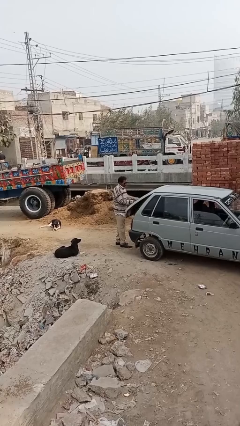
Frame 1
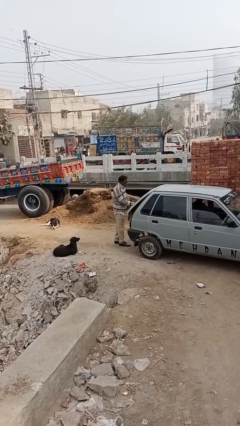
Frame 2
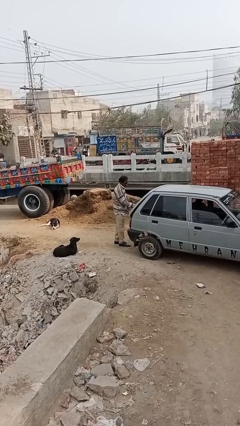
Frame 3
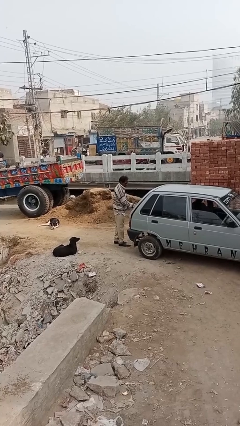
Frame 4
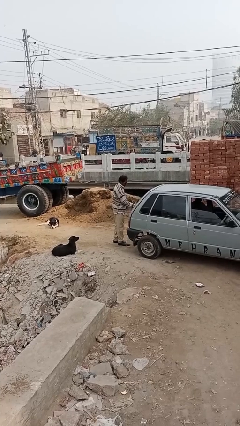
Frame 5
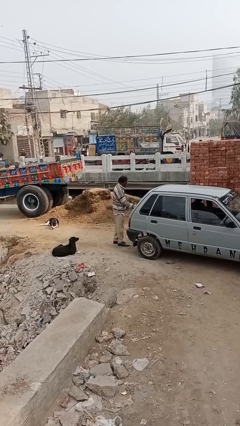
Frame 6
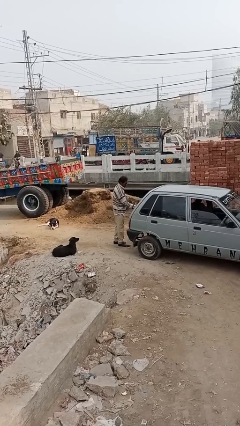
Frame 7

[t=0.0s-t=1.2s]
person closes car trunk

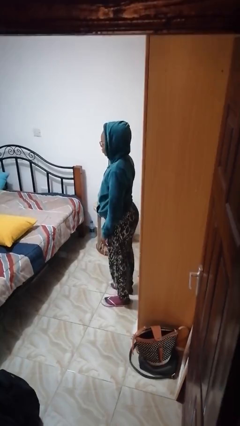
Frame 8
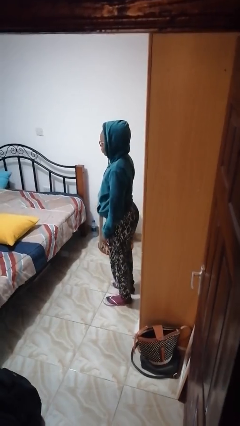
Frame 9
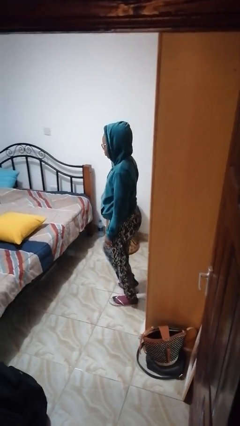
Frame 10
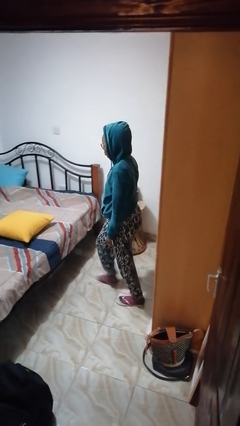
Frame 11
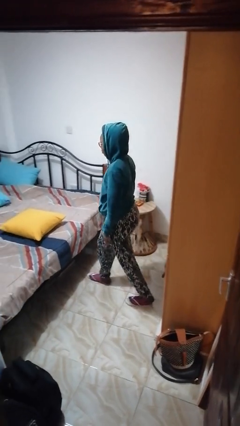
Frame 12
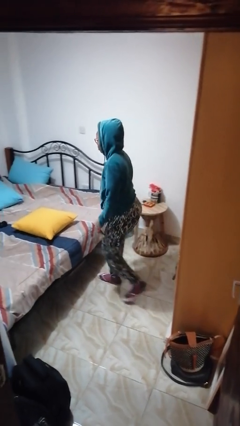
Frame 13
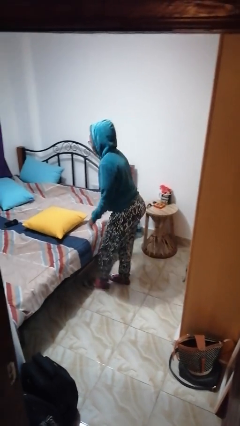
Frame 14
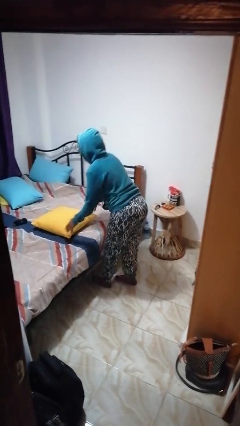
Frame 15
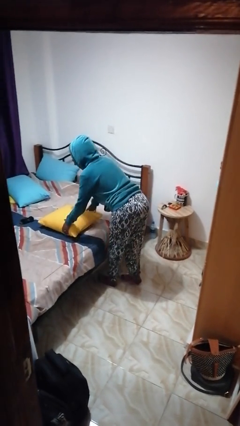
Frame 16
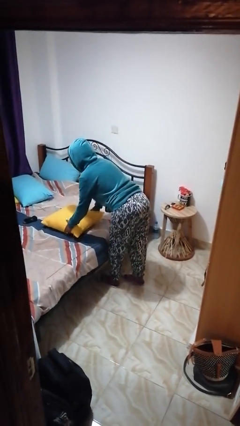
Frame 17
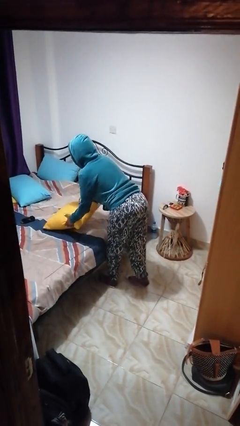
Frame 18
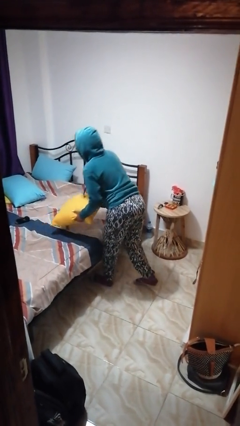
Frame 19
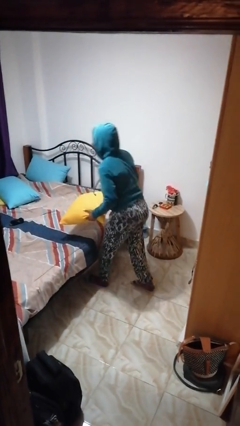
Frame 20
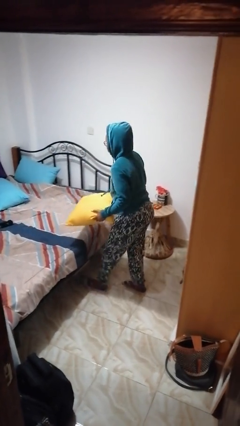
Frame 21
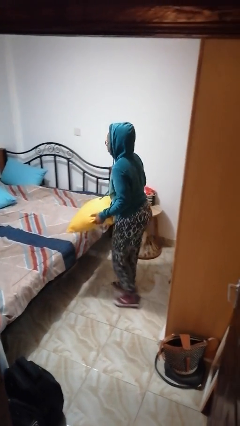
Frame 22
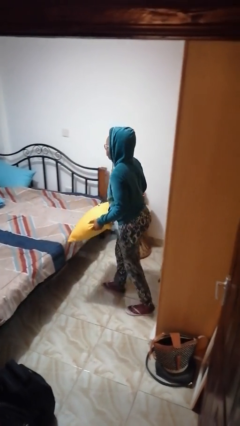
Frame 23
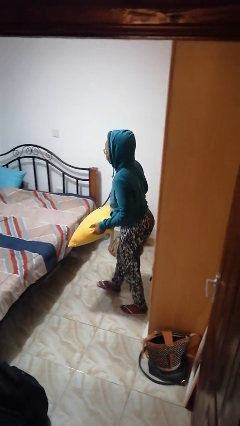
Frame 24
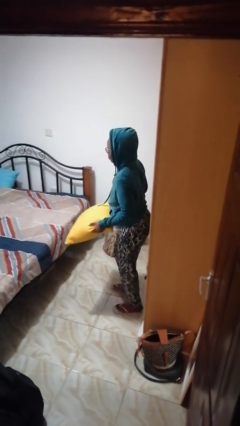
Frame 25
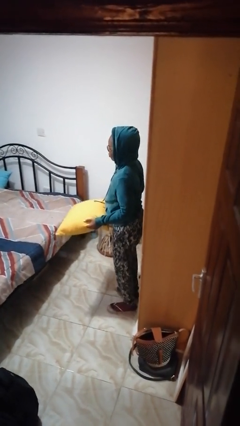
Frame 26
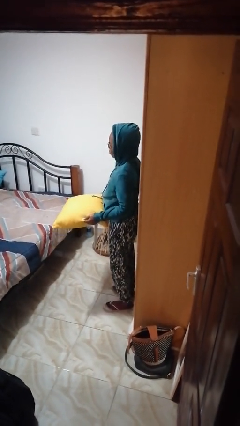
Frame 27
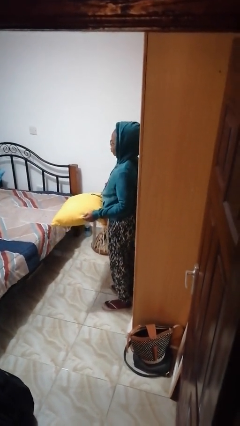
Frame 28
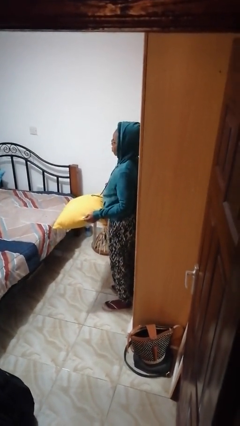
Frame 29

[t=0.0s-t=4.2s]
person picks up object from bed

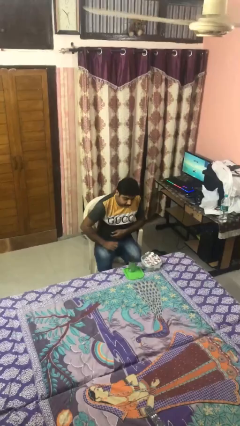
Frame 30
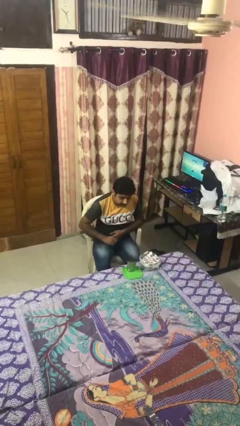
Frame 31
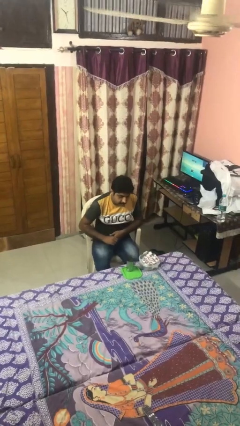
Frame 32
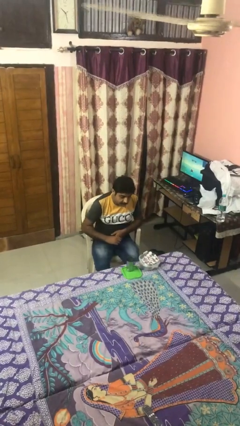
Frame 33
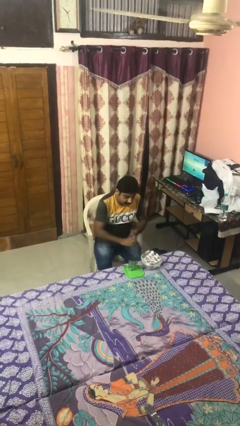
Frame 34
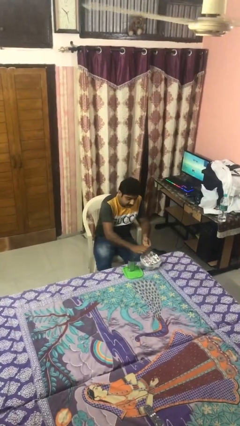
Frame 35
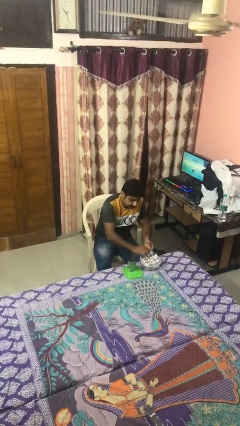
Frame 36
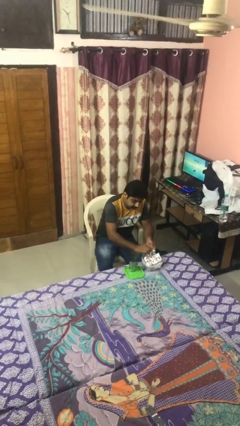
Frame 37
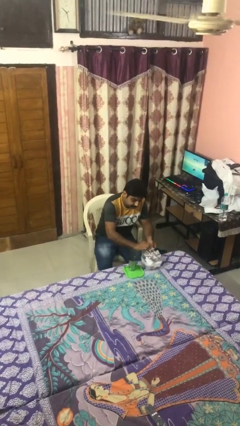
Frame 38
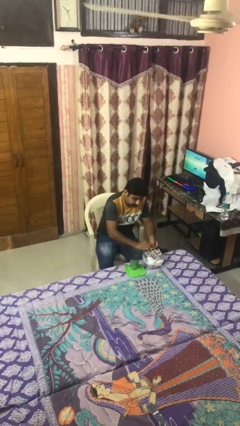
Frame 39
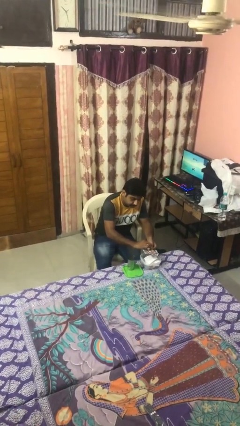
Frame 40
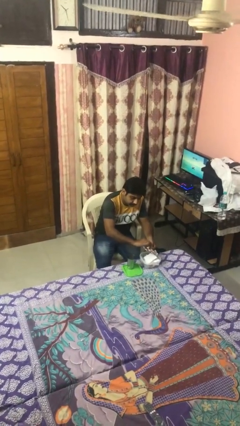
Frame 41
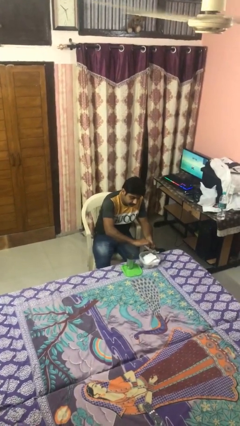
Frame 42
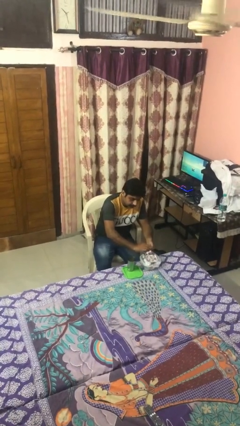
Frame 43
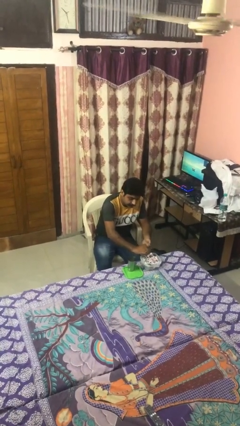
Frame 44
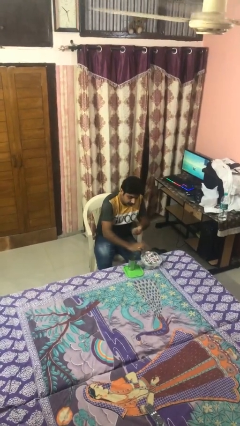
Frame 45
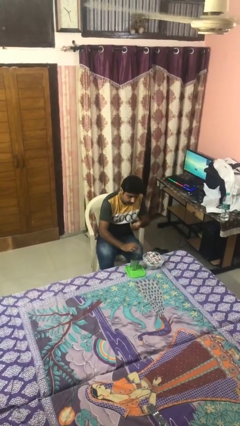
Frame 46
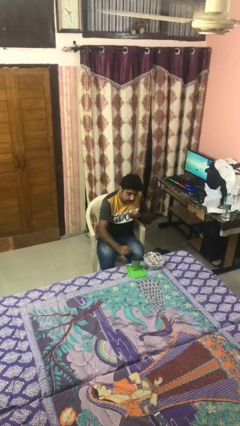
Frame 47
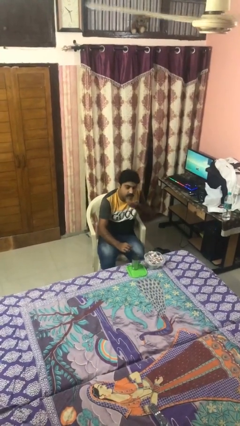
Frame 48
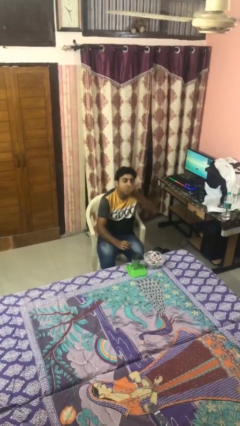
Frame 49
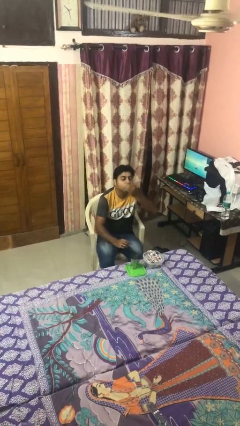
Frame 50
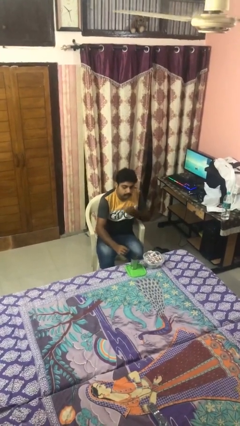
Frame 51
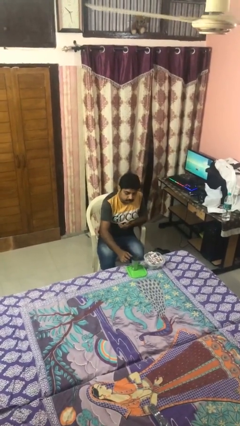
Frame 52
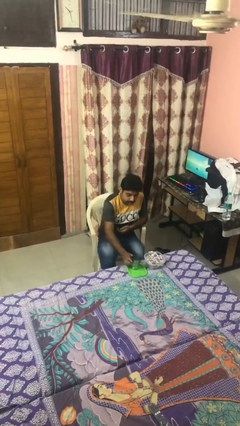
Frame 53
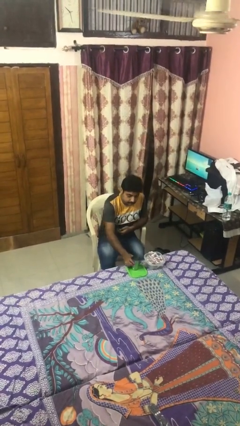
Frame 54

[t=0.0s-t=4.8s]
person takes medicine pills

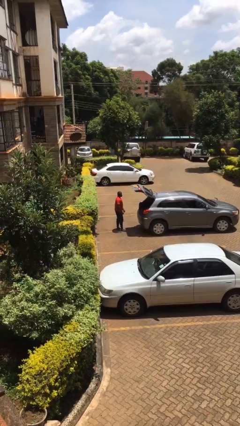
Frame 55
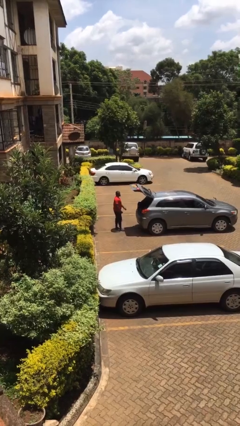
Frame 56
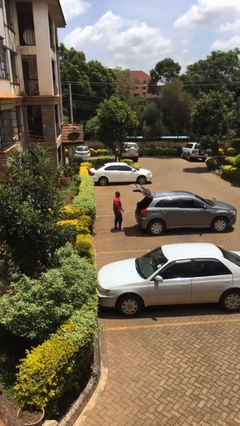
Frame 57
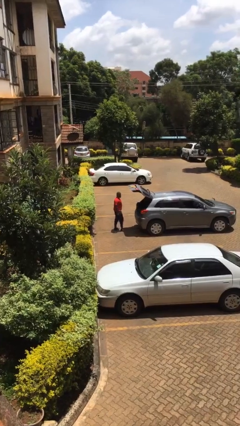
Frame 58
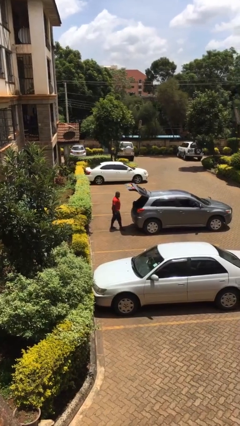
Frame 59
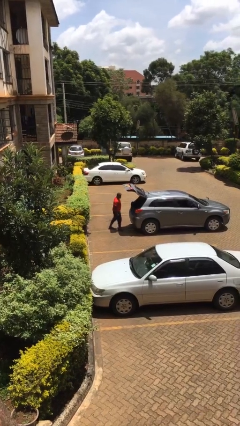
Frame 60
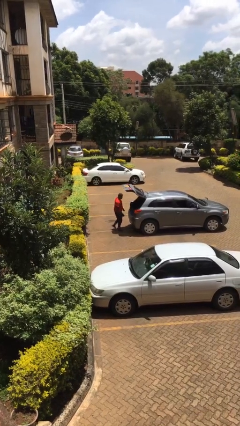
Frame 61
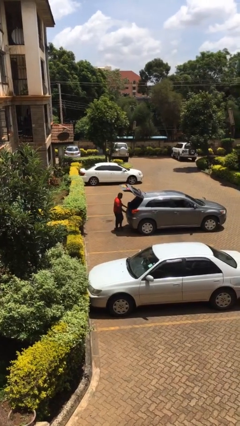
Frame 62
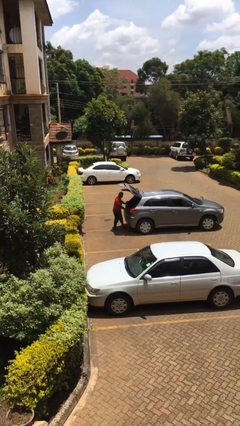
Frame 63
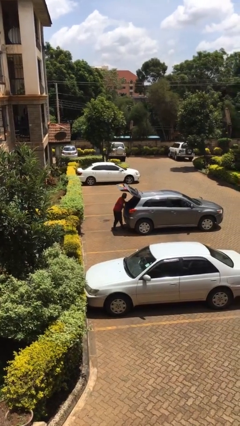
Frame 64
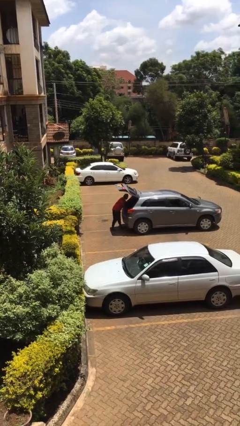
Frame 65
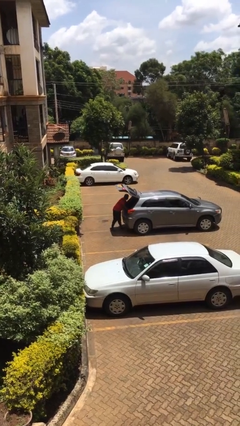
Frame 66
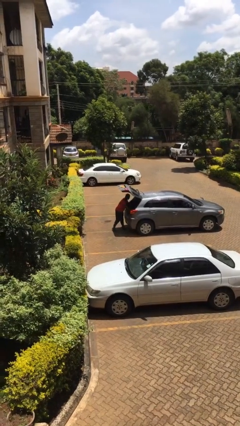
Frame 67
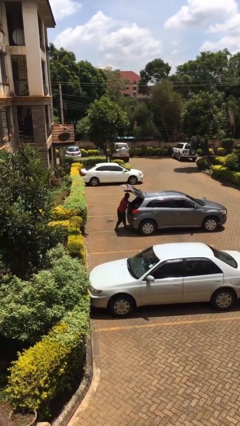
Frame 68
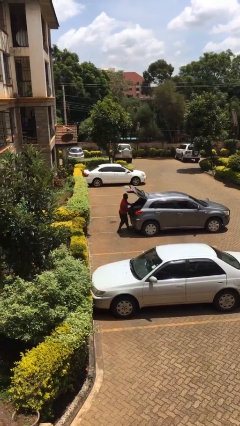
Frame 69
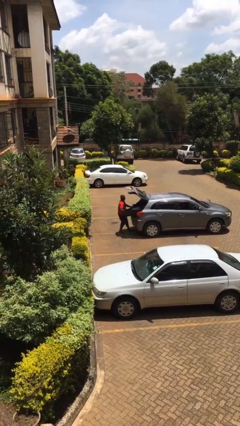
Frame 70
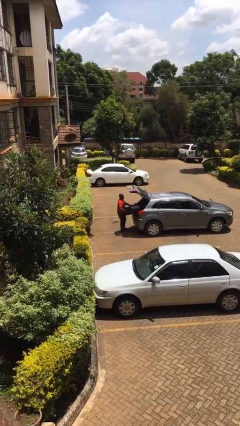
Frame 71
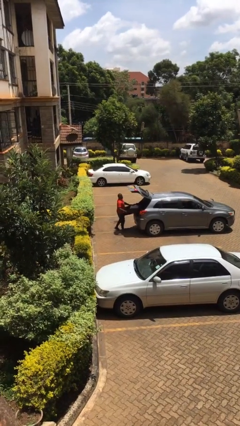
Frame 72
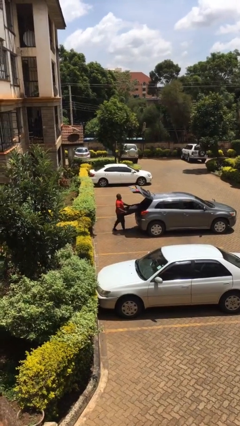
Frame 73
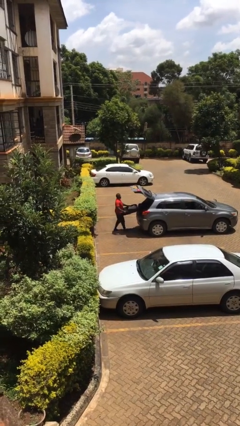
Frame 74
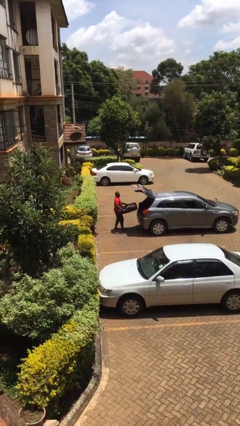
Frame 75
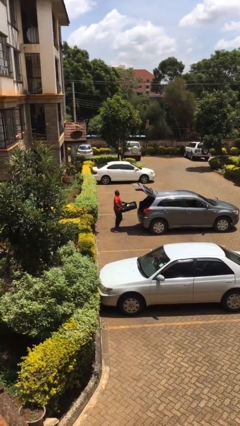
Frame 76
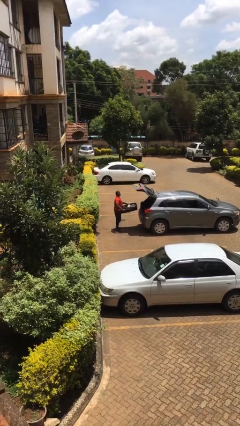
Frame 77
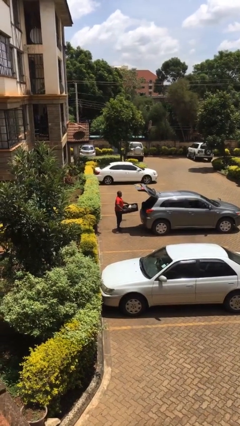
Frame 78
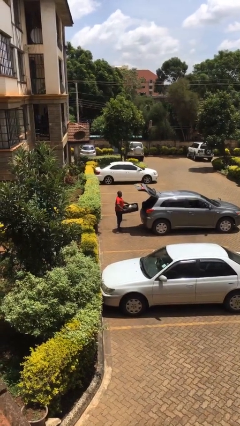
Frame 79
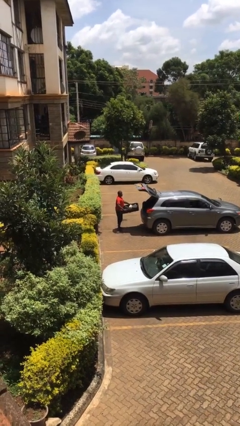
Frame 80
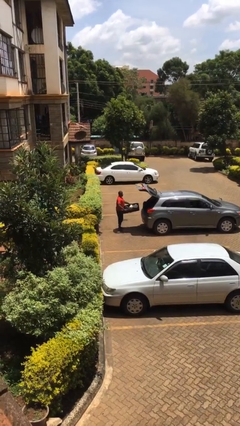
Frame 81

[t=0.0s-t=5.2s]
person unloads car

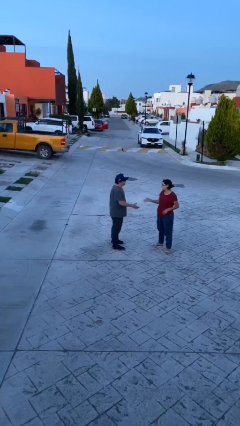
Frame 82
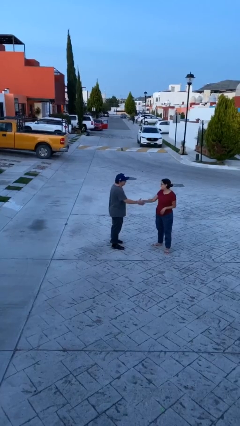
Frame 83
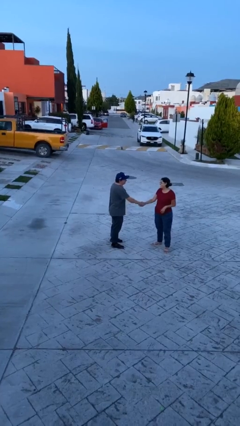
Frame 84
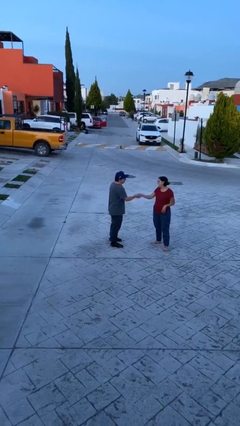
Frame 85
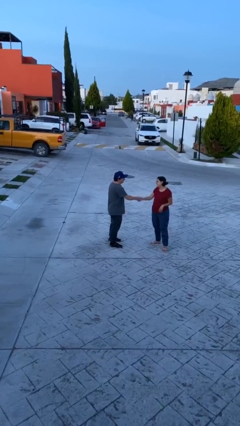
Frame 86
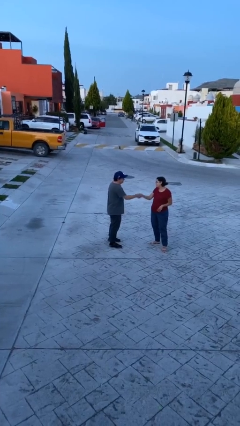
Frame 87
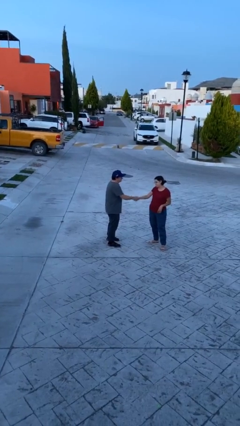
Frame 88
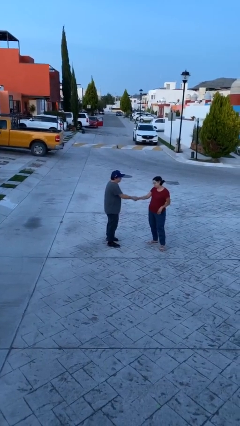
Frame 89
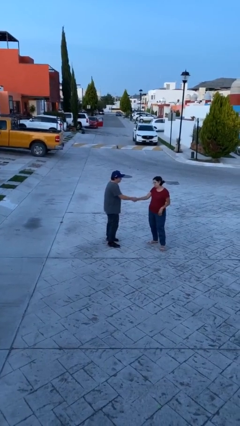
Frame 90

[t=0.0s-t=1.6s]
person shakes hand

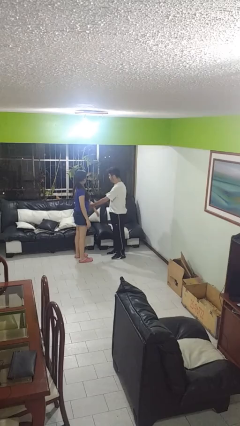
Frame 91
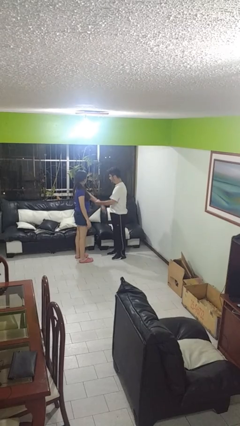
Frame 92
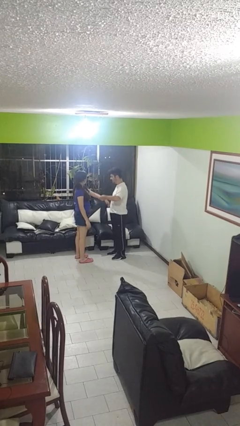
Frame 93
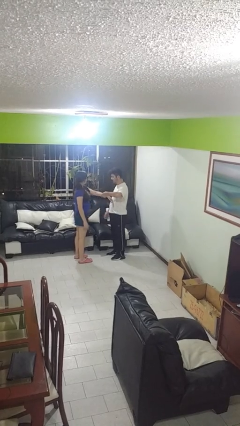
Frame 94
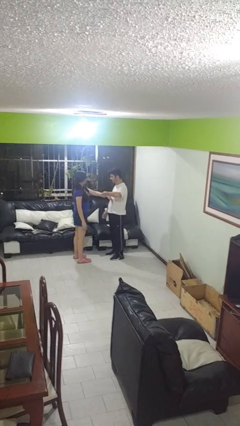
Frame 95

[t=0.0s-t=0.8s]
person grabs person by forearm
